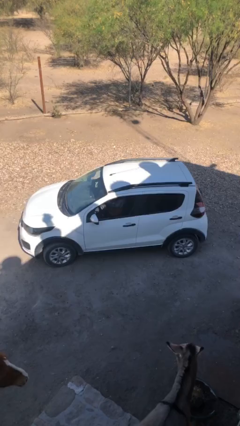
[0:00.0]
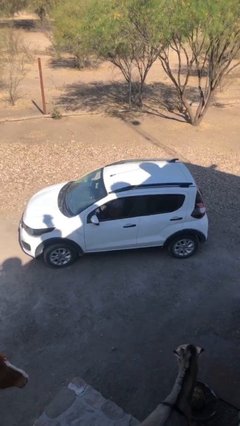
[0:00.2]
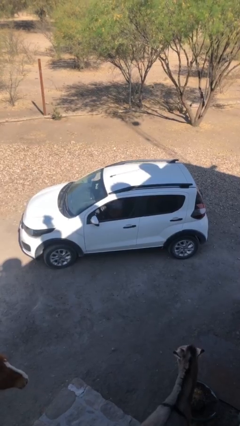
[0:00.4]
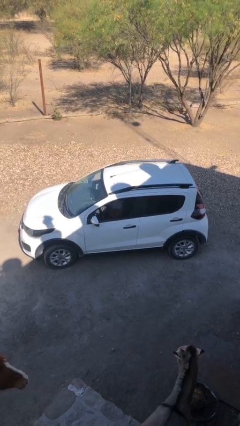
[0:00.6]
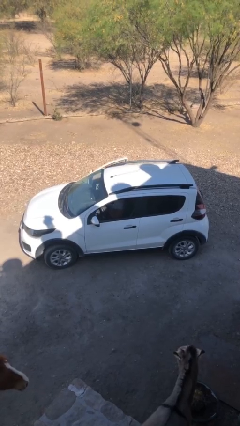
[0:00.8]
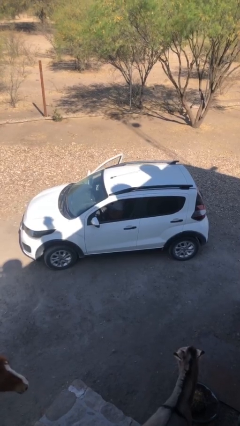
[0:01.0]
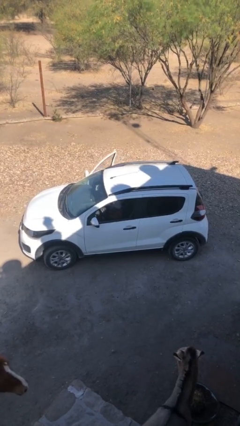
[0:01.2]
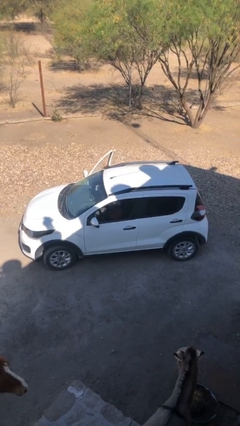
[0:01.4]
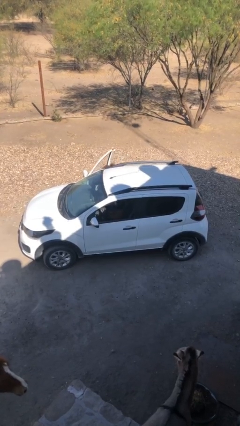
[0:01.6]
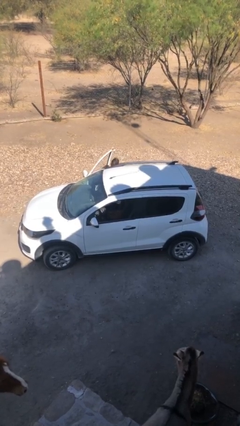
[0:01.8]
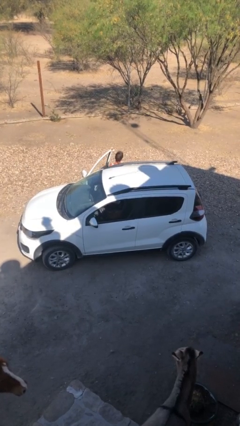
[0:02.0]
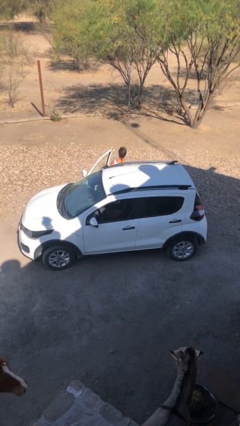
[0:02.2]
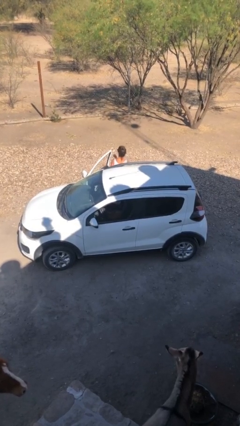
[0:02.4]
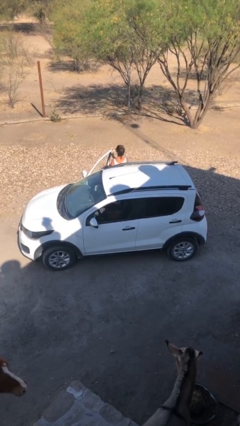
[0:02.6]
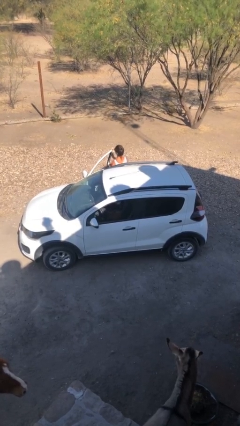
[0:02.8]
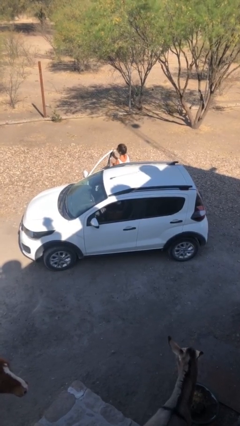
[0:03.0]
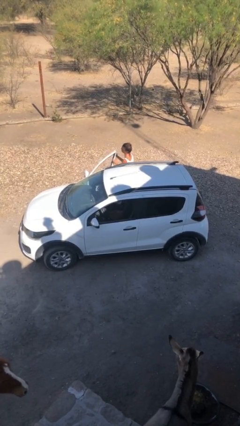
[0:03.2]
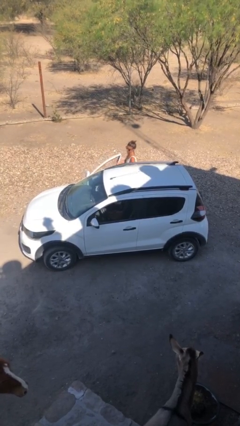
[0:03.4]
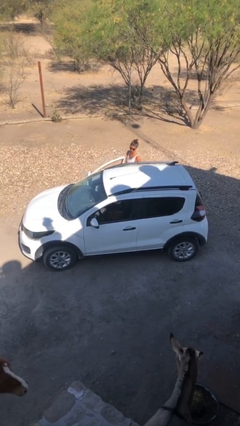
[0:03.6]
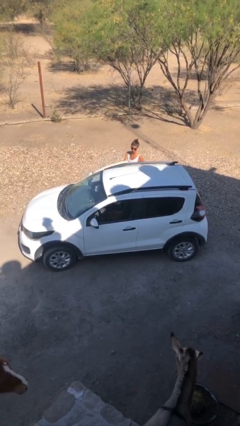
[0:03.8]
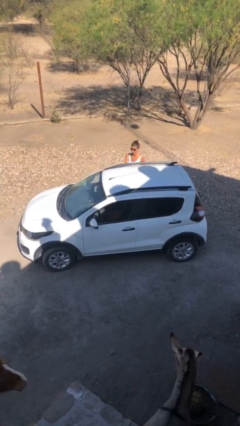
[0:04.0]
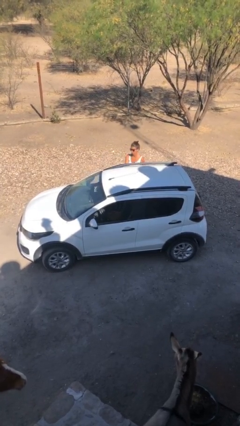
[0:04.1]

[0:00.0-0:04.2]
car drops off person

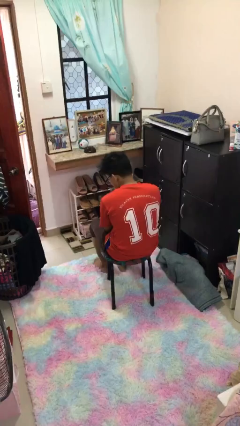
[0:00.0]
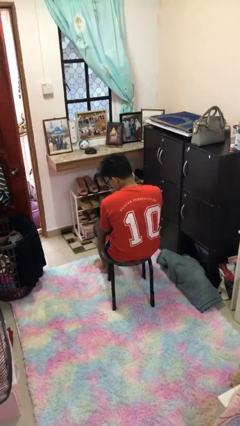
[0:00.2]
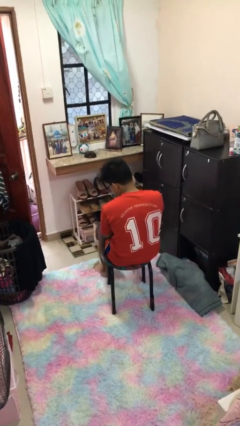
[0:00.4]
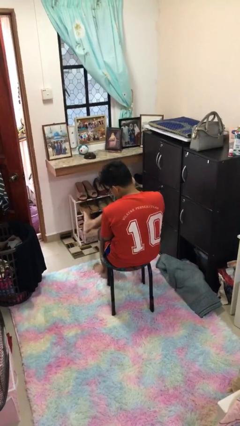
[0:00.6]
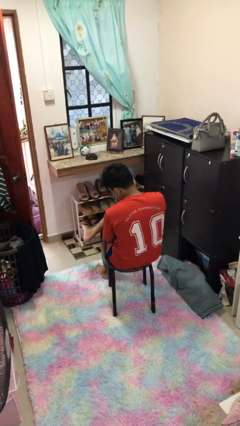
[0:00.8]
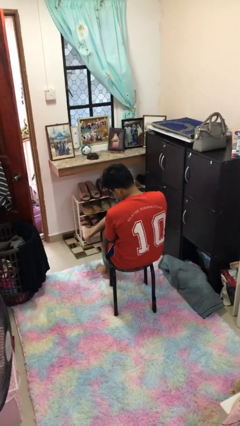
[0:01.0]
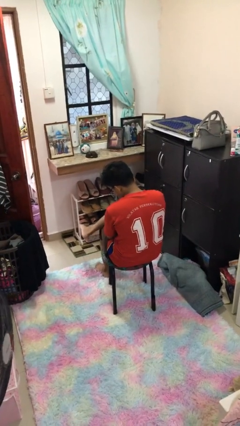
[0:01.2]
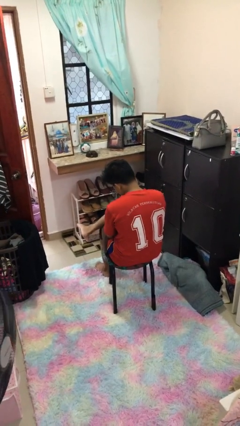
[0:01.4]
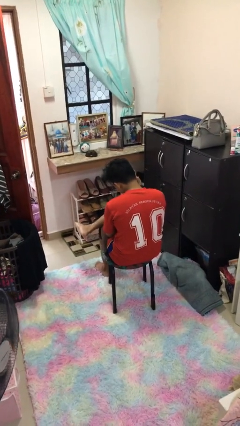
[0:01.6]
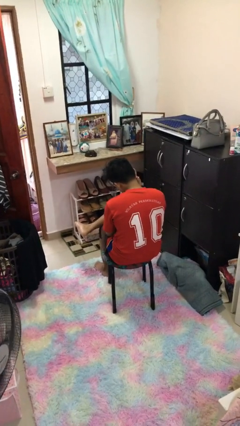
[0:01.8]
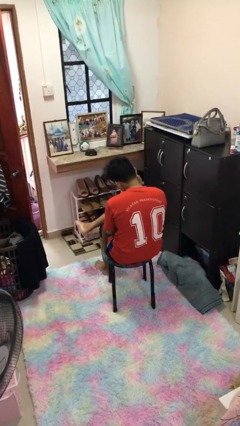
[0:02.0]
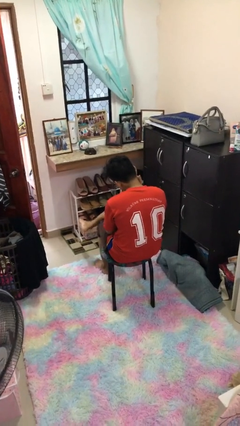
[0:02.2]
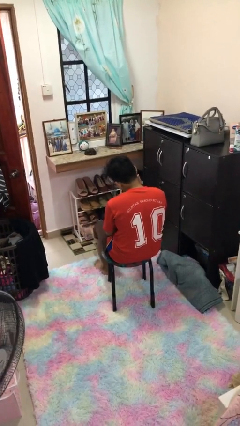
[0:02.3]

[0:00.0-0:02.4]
person crosses legs

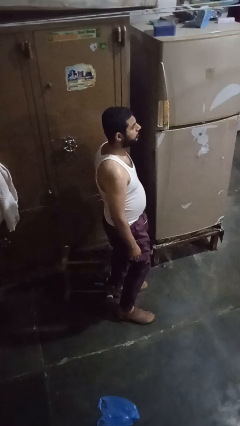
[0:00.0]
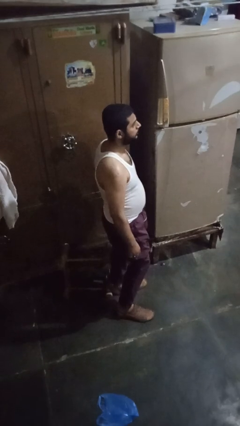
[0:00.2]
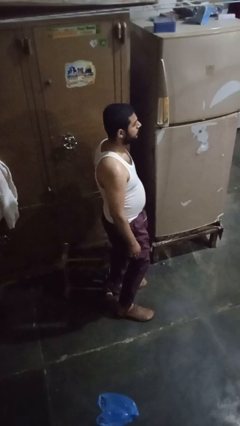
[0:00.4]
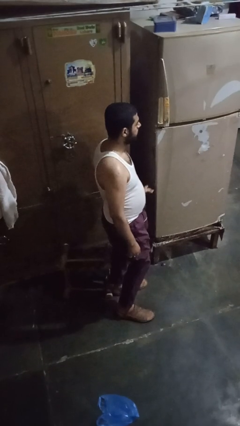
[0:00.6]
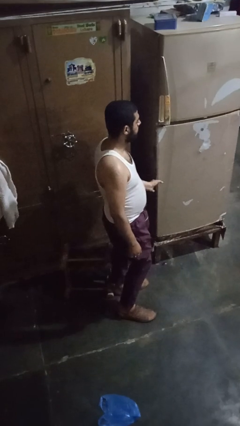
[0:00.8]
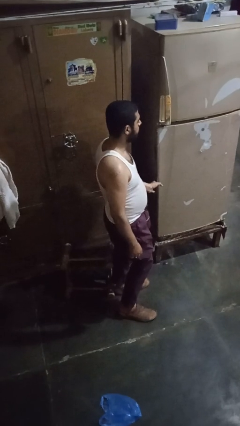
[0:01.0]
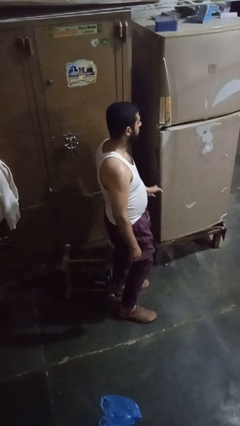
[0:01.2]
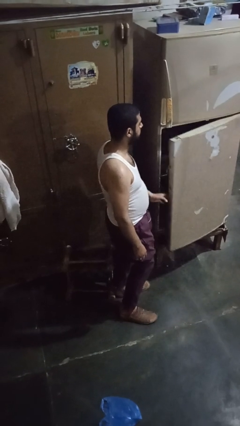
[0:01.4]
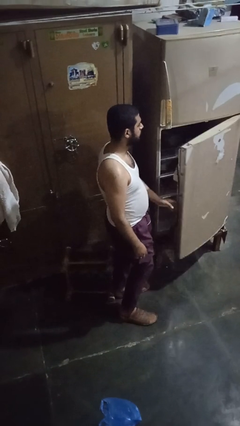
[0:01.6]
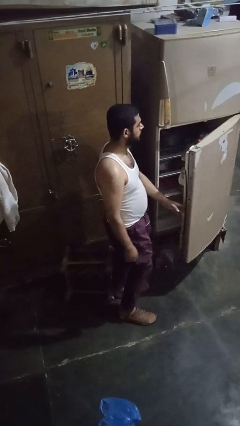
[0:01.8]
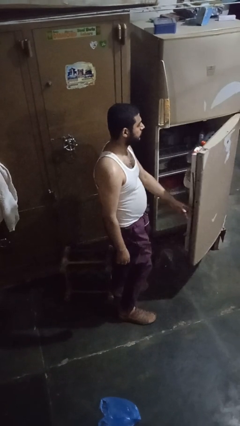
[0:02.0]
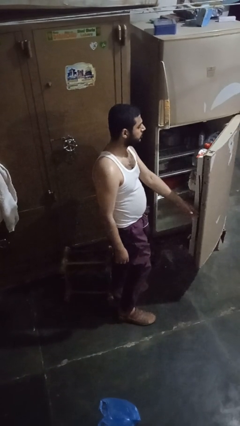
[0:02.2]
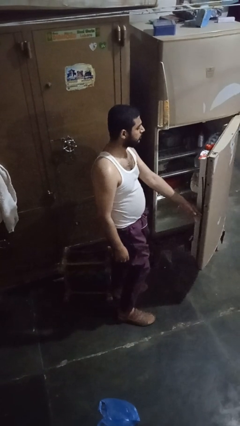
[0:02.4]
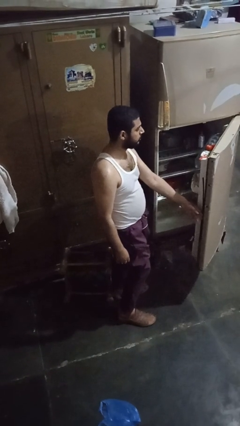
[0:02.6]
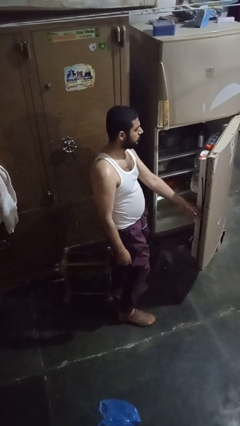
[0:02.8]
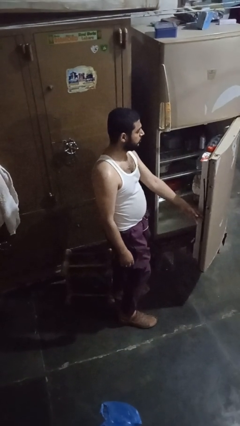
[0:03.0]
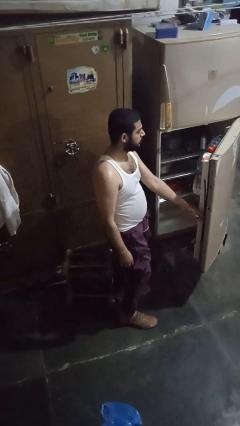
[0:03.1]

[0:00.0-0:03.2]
person opens refrigerator

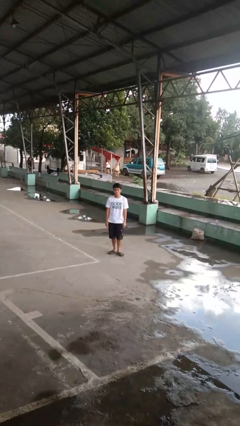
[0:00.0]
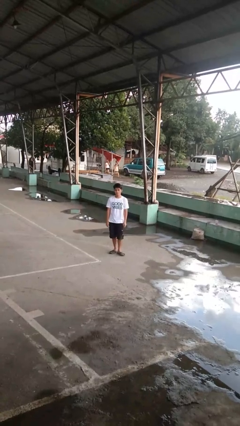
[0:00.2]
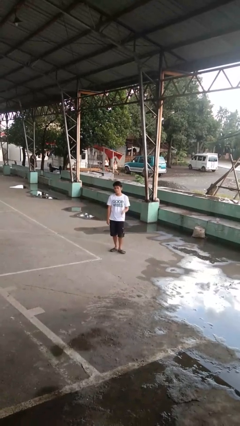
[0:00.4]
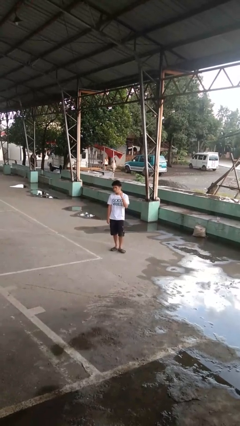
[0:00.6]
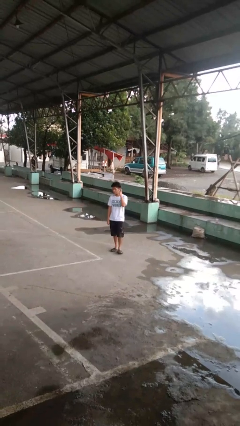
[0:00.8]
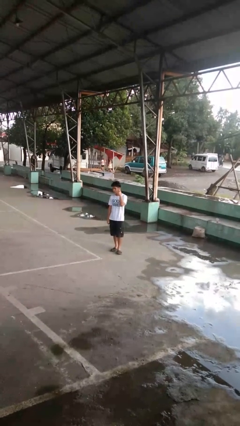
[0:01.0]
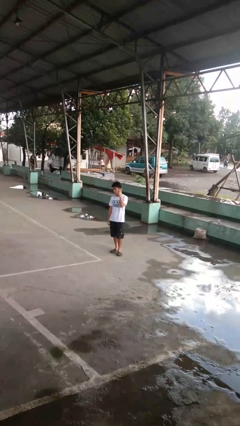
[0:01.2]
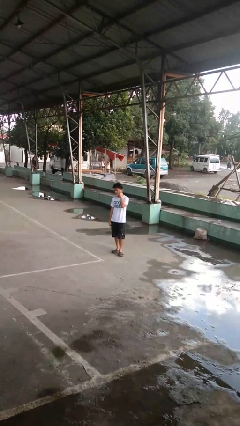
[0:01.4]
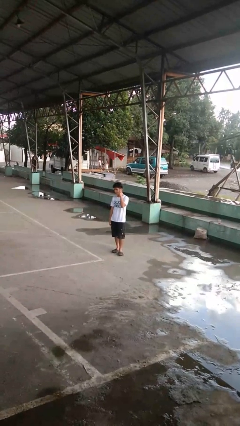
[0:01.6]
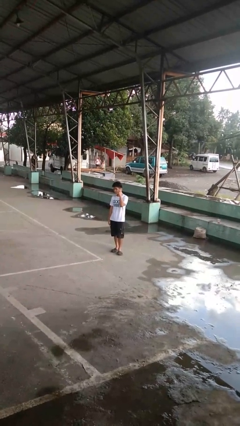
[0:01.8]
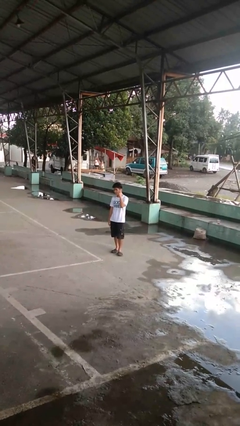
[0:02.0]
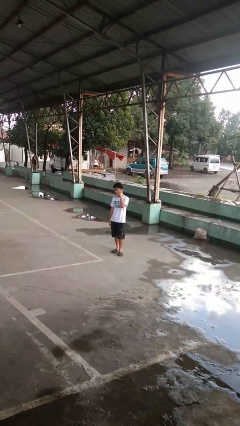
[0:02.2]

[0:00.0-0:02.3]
person gestures listen closely

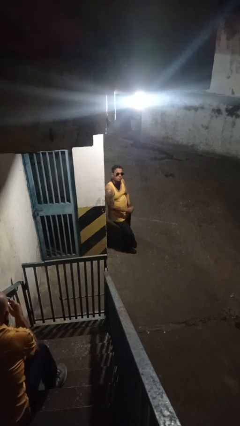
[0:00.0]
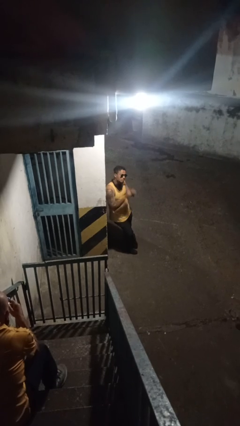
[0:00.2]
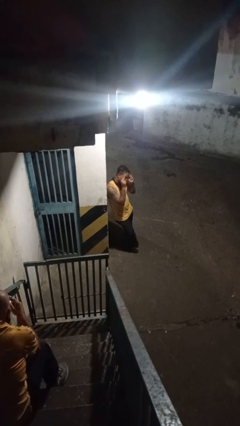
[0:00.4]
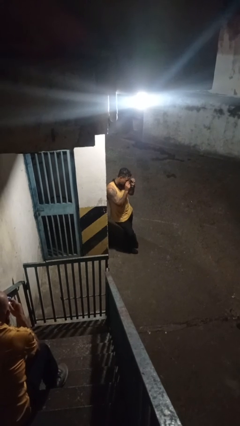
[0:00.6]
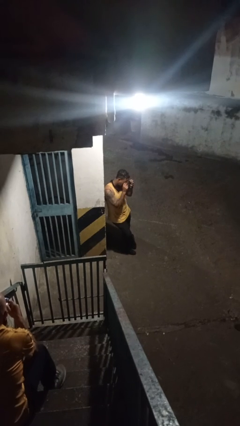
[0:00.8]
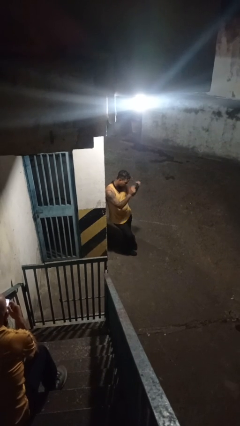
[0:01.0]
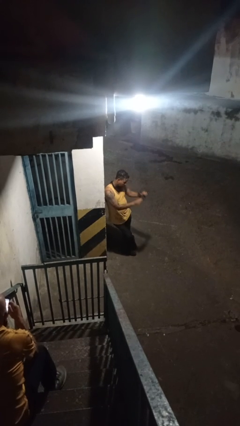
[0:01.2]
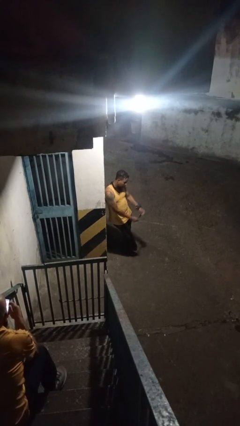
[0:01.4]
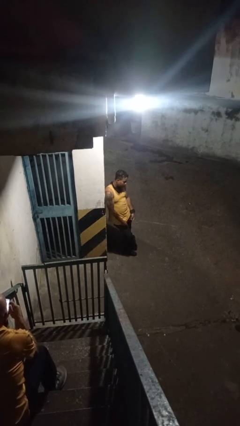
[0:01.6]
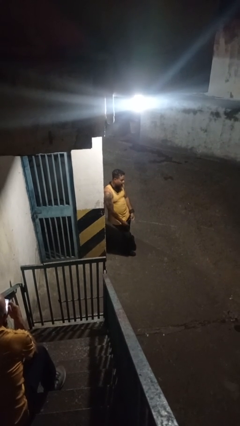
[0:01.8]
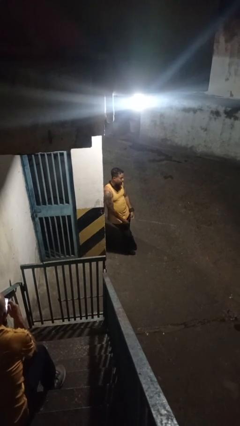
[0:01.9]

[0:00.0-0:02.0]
person takes off sunglasses

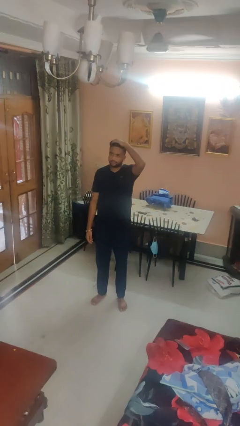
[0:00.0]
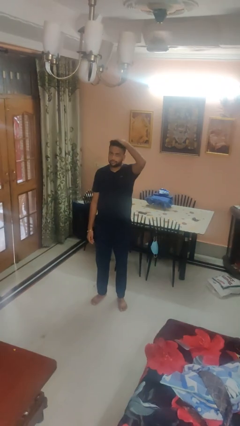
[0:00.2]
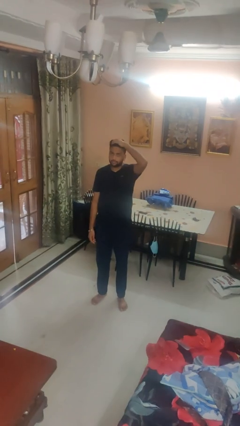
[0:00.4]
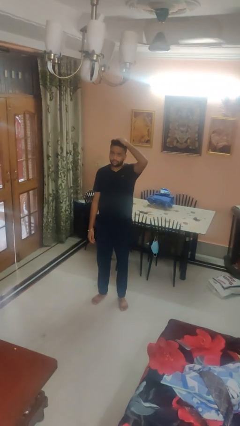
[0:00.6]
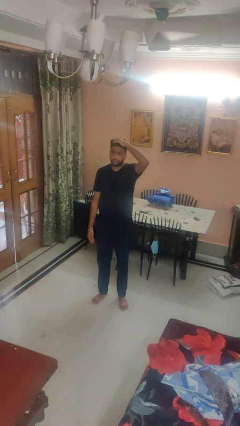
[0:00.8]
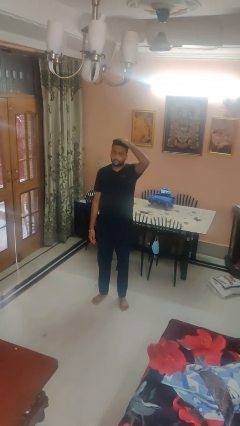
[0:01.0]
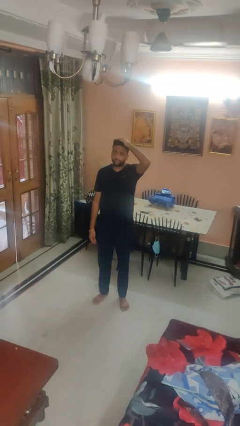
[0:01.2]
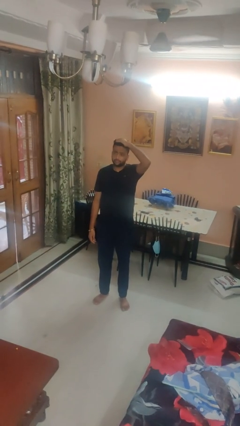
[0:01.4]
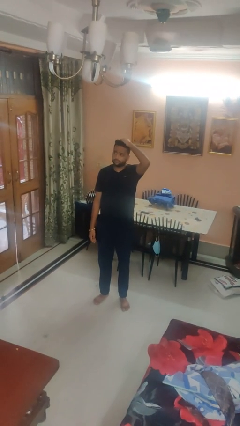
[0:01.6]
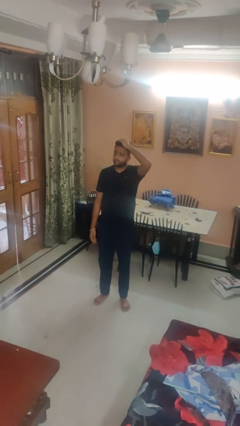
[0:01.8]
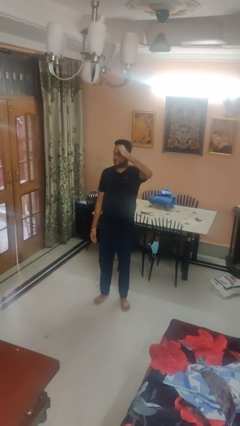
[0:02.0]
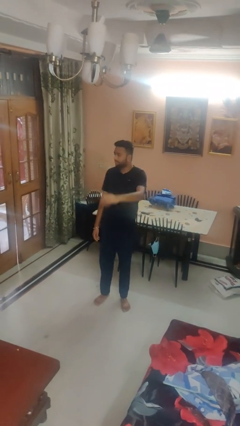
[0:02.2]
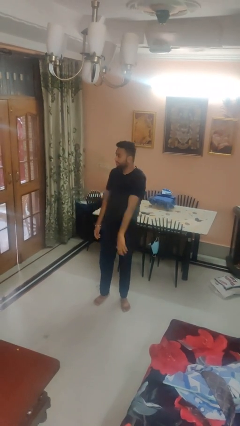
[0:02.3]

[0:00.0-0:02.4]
person pats head

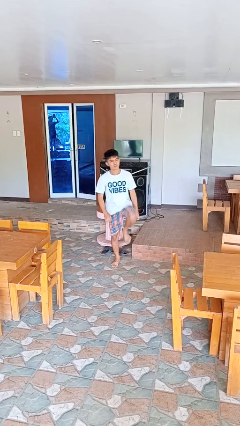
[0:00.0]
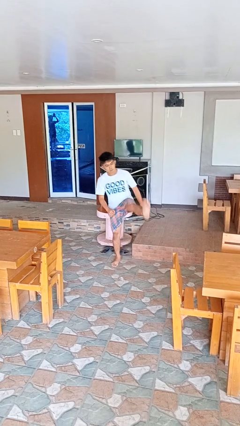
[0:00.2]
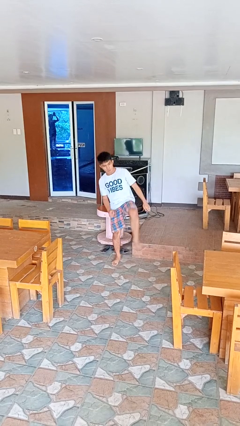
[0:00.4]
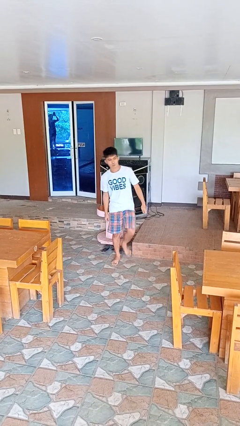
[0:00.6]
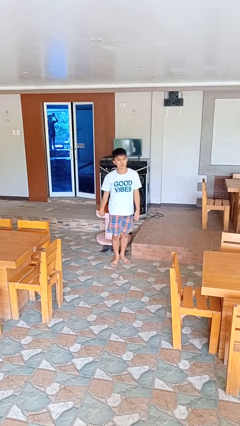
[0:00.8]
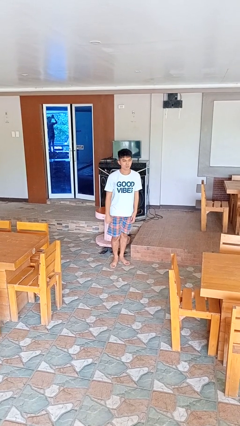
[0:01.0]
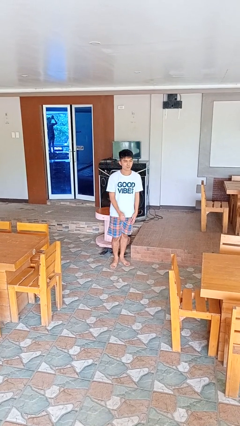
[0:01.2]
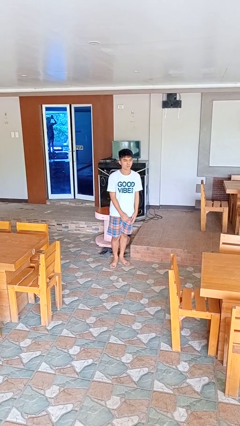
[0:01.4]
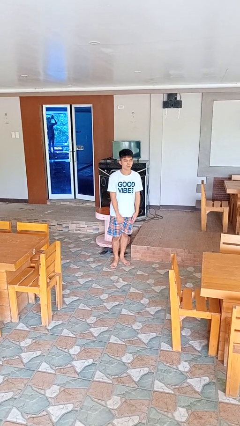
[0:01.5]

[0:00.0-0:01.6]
person karate kicks
